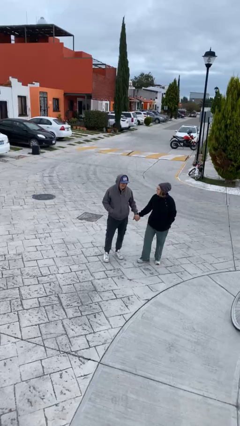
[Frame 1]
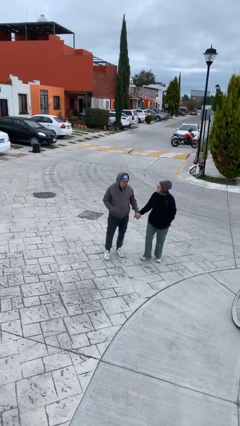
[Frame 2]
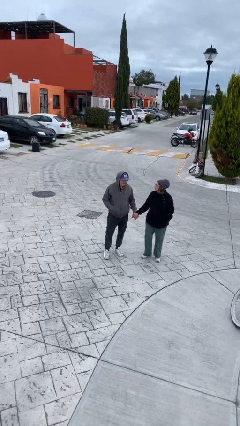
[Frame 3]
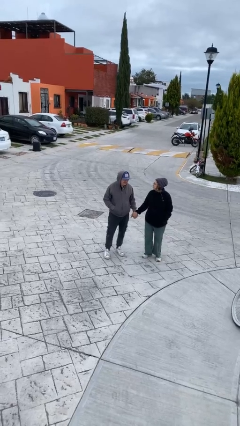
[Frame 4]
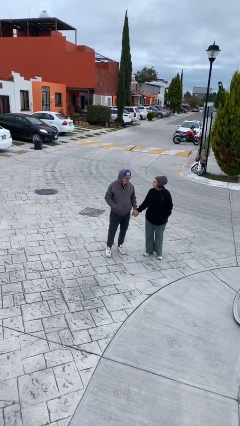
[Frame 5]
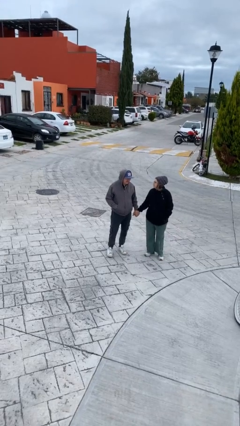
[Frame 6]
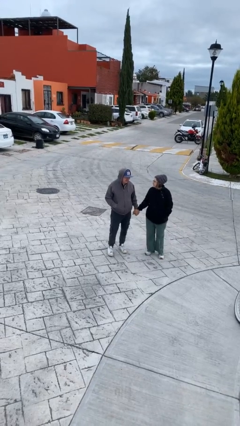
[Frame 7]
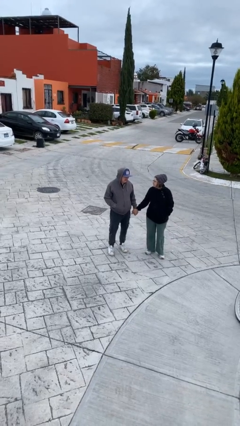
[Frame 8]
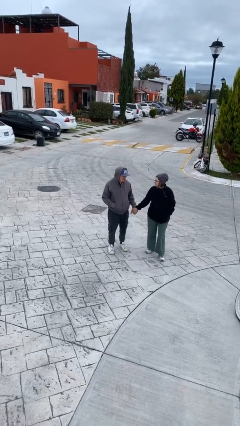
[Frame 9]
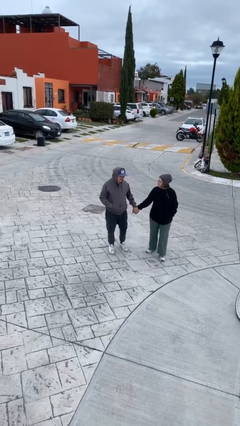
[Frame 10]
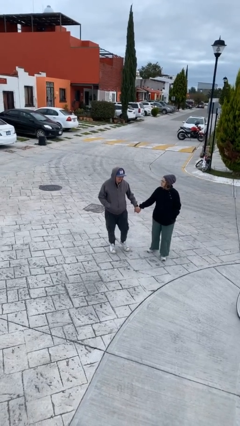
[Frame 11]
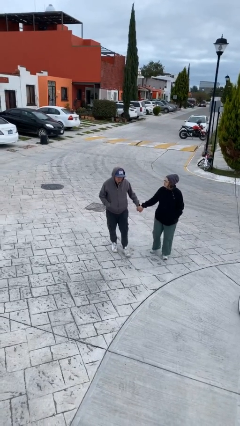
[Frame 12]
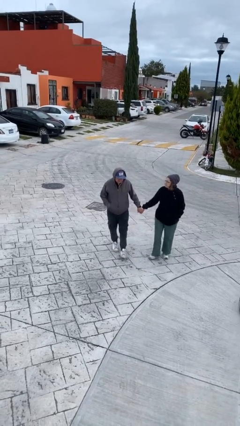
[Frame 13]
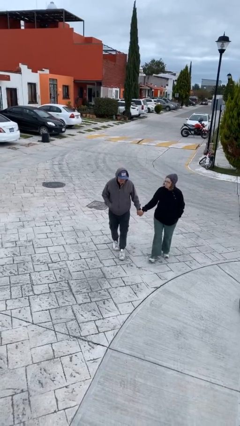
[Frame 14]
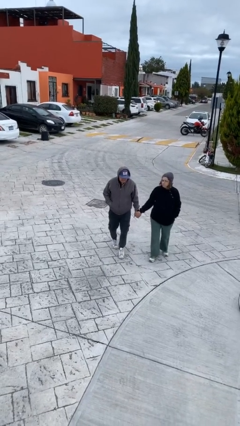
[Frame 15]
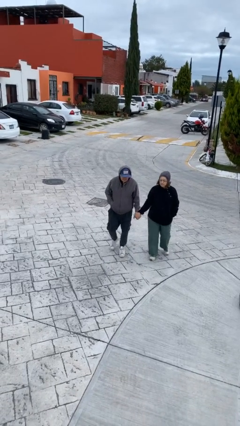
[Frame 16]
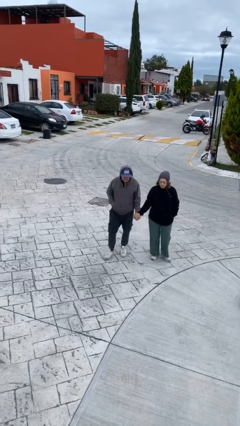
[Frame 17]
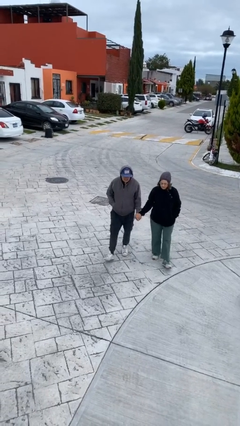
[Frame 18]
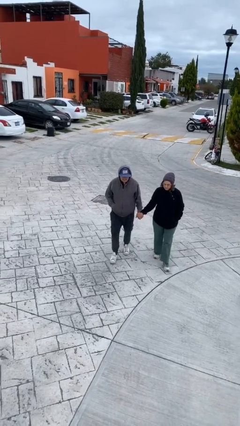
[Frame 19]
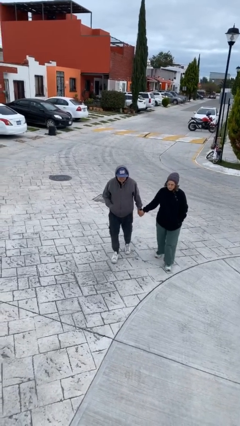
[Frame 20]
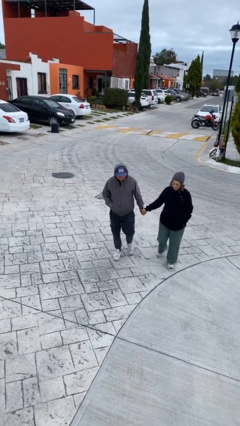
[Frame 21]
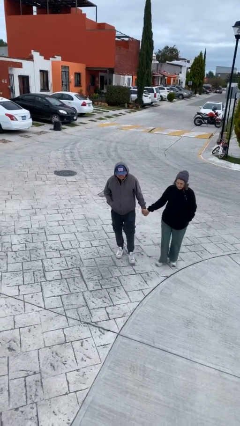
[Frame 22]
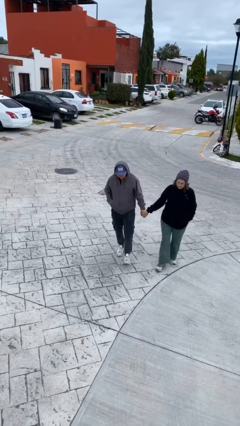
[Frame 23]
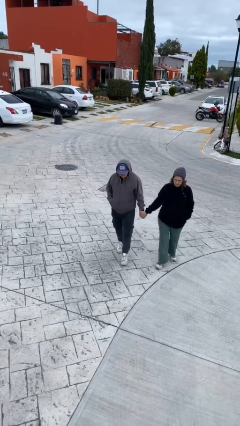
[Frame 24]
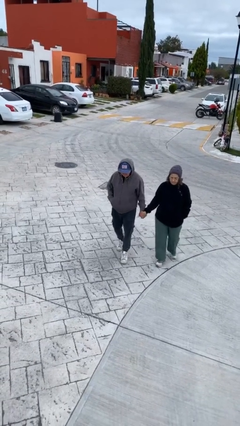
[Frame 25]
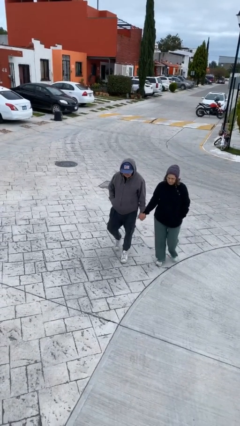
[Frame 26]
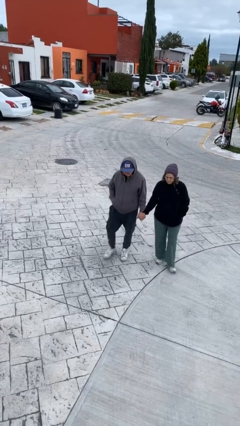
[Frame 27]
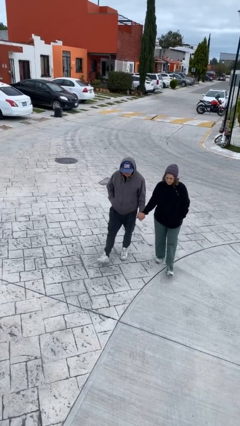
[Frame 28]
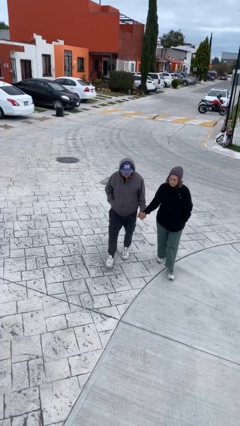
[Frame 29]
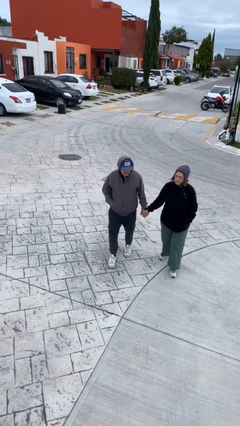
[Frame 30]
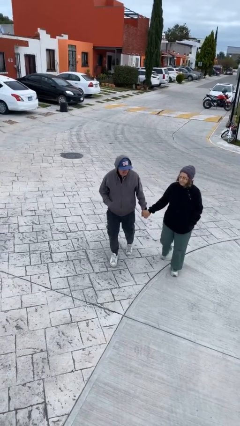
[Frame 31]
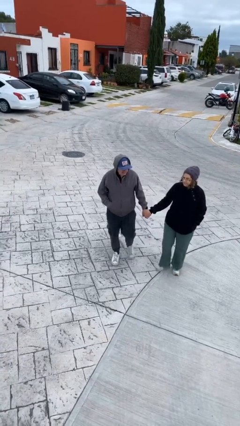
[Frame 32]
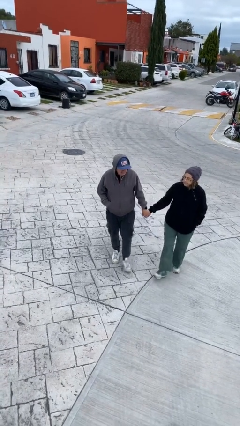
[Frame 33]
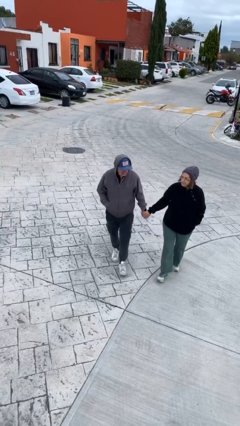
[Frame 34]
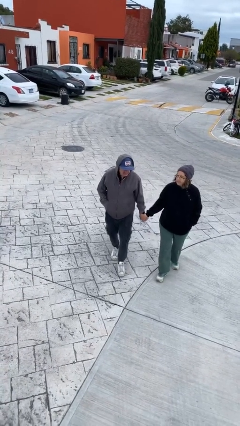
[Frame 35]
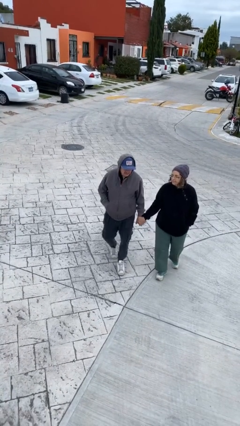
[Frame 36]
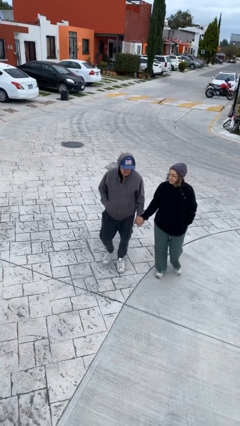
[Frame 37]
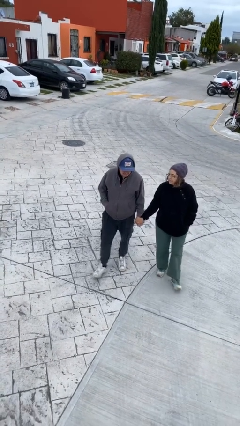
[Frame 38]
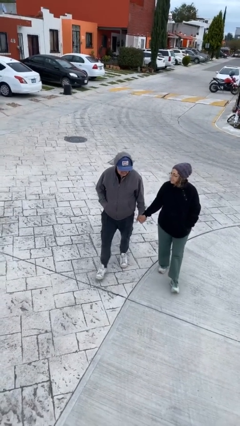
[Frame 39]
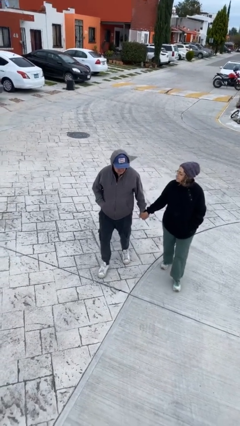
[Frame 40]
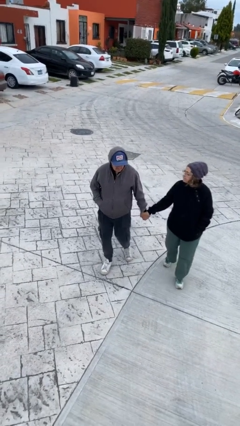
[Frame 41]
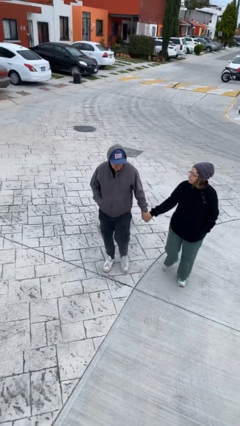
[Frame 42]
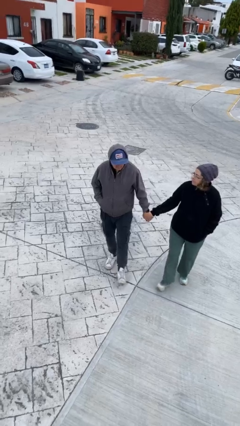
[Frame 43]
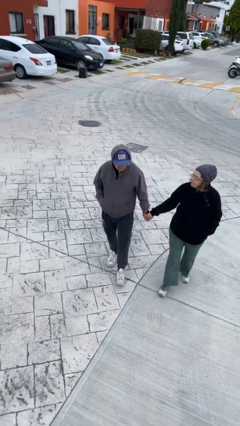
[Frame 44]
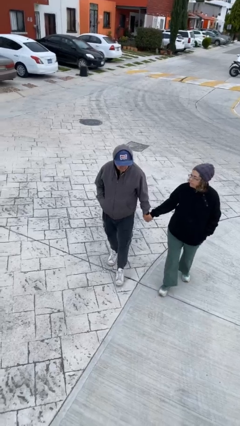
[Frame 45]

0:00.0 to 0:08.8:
person holds hand

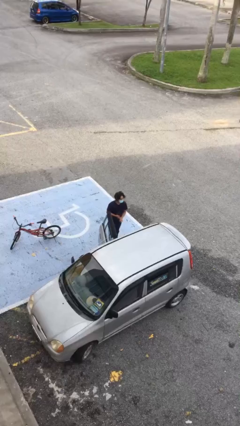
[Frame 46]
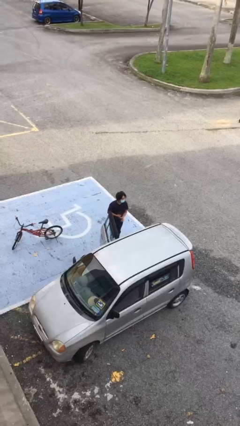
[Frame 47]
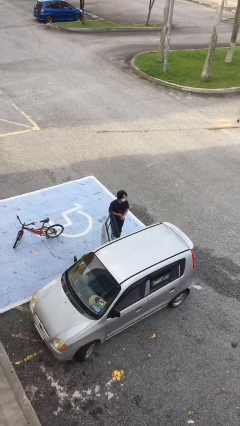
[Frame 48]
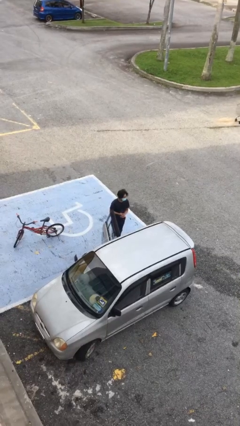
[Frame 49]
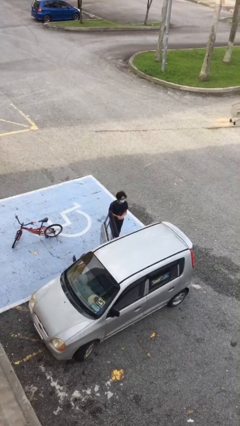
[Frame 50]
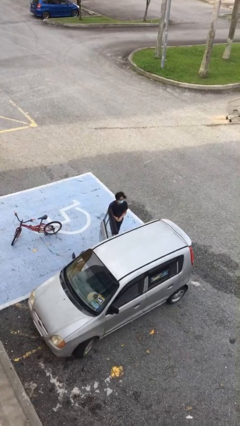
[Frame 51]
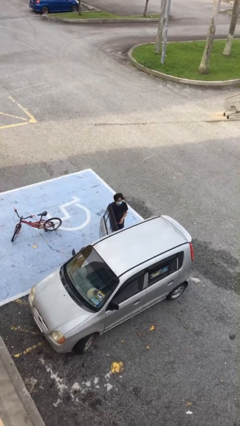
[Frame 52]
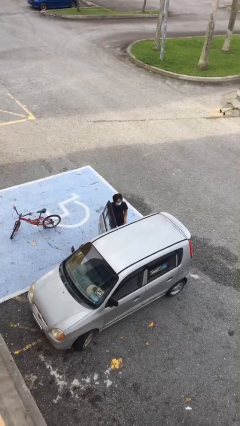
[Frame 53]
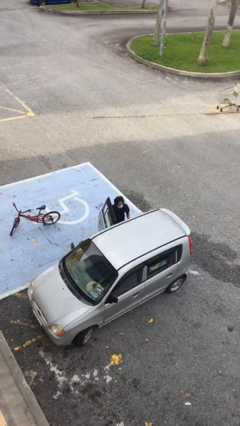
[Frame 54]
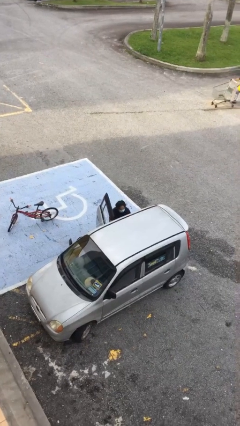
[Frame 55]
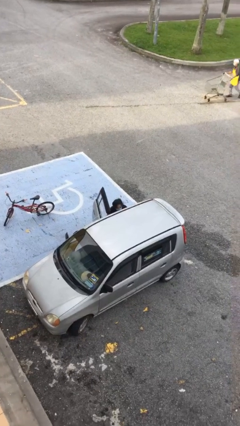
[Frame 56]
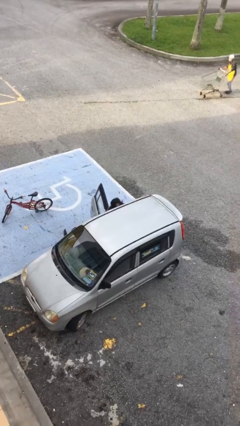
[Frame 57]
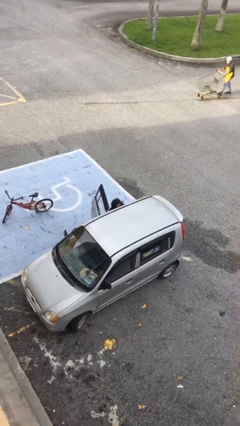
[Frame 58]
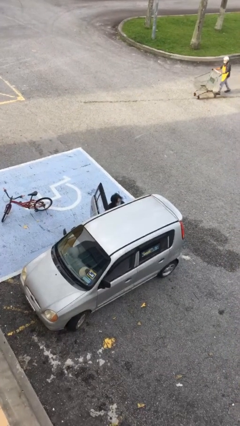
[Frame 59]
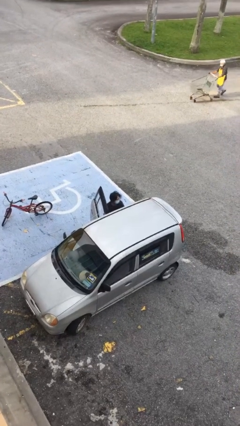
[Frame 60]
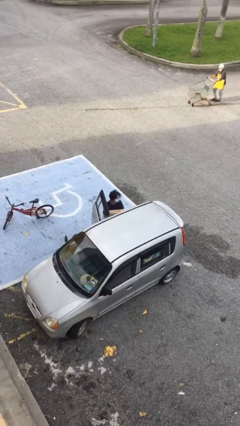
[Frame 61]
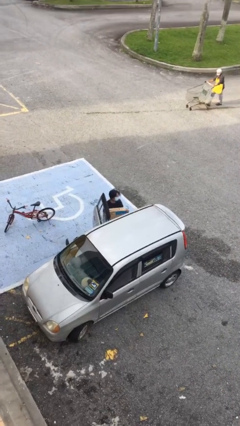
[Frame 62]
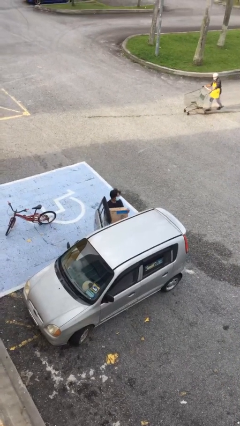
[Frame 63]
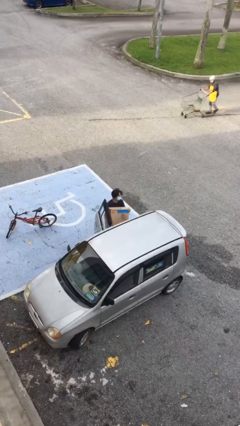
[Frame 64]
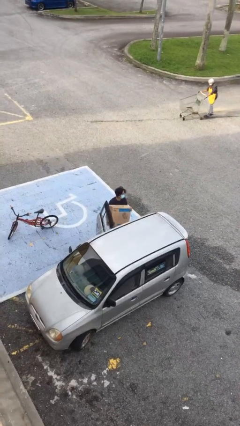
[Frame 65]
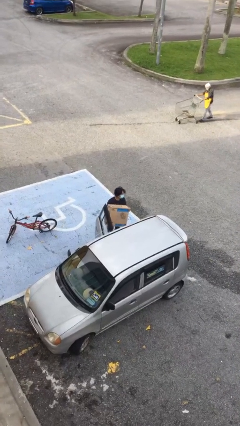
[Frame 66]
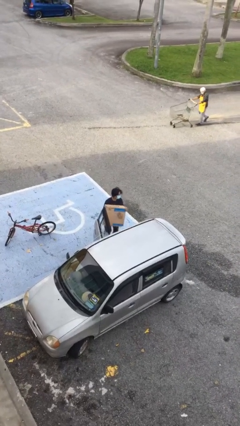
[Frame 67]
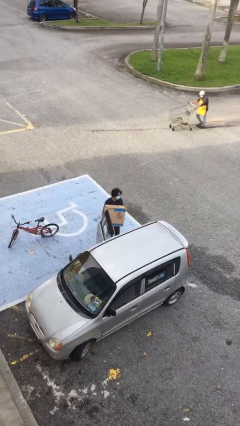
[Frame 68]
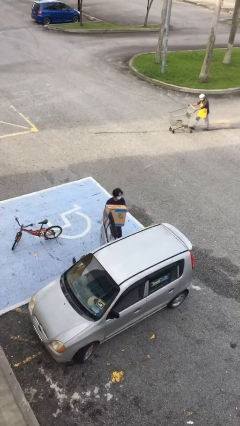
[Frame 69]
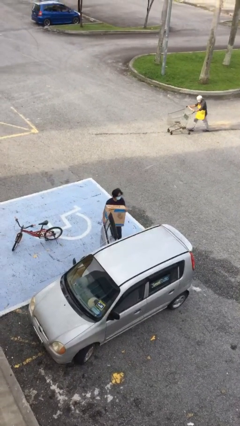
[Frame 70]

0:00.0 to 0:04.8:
person unloads car

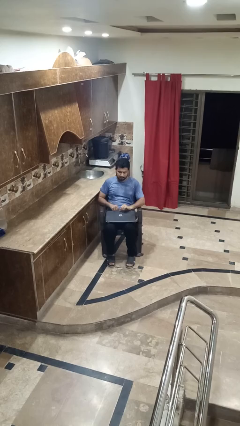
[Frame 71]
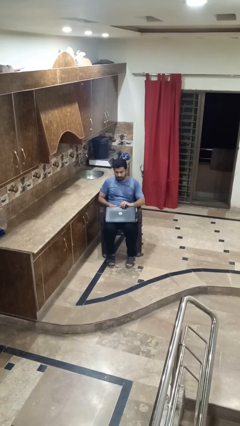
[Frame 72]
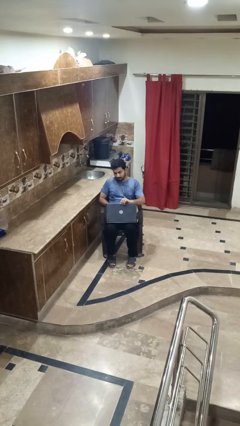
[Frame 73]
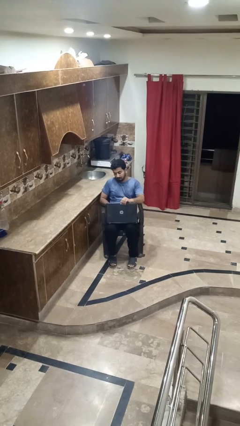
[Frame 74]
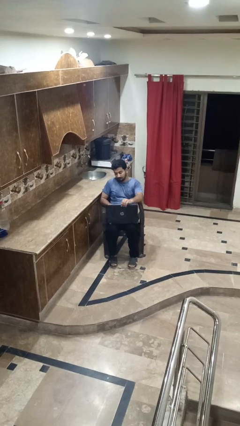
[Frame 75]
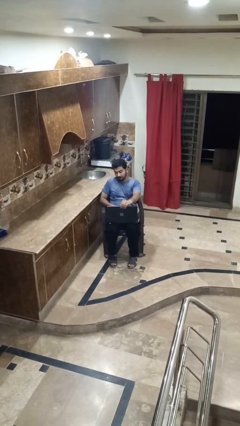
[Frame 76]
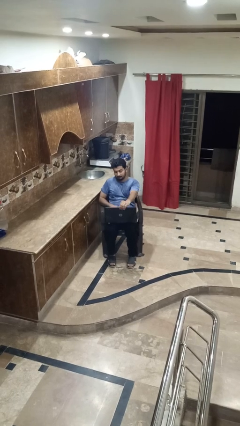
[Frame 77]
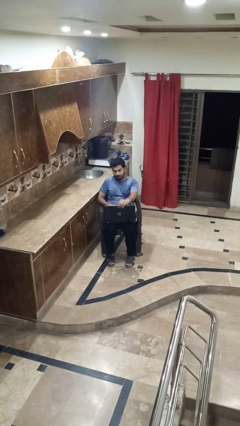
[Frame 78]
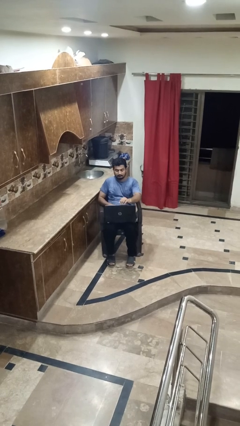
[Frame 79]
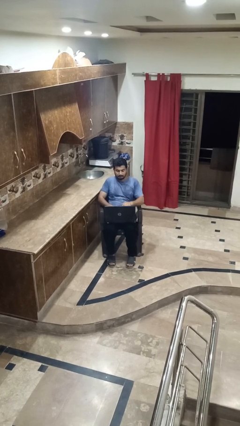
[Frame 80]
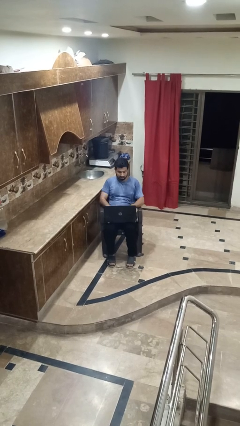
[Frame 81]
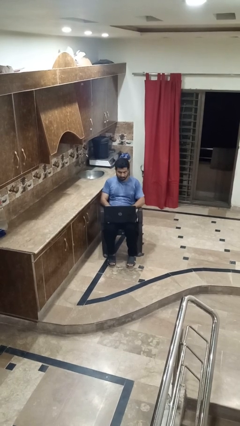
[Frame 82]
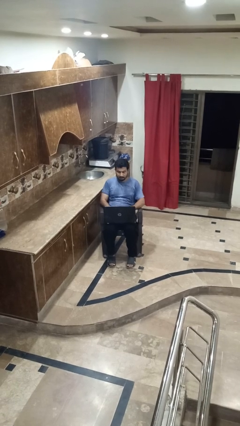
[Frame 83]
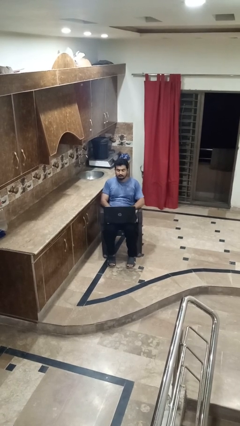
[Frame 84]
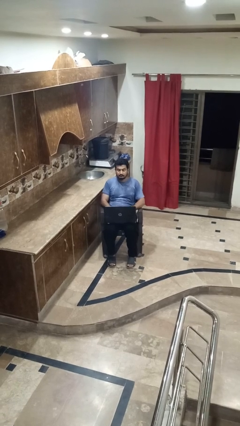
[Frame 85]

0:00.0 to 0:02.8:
person opens laptop

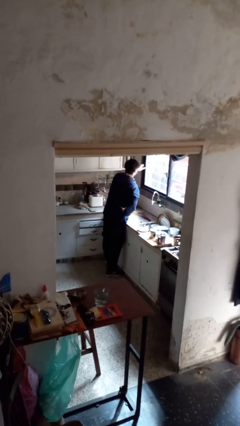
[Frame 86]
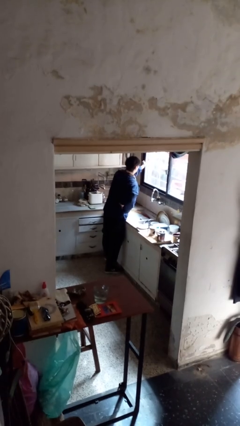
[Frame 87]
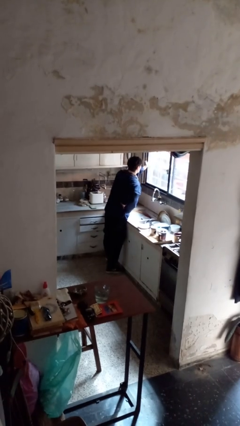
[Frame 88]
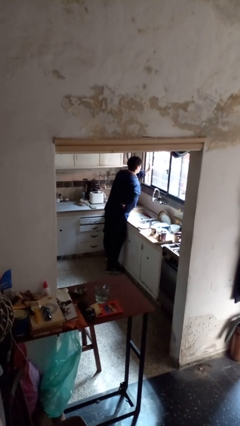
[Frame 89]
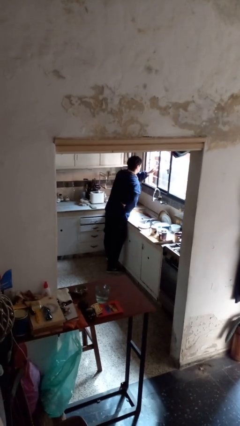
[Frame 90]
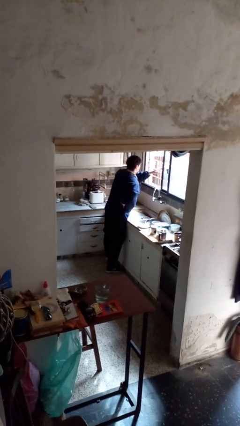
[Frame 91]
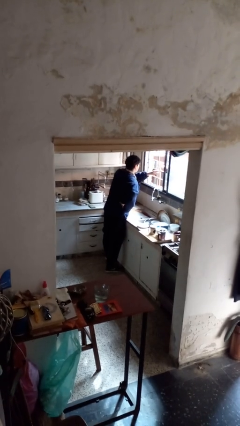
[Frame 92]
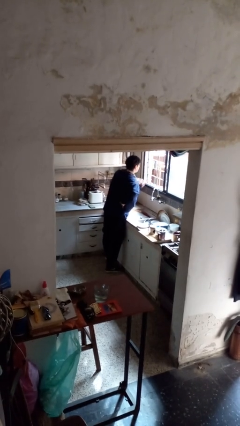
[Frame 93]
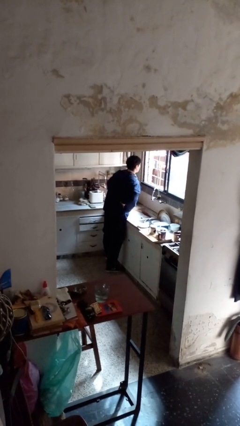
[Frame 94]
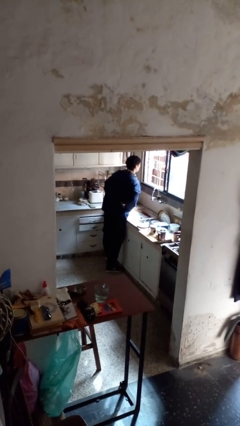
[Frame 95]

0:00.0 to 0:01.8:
person opens home window
